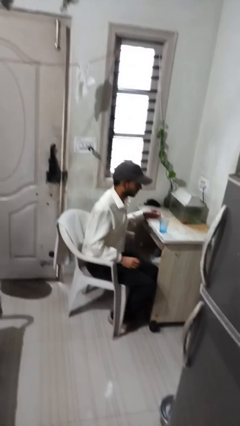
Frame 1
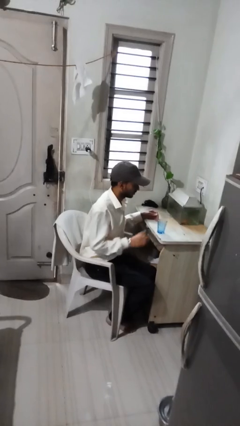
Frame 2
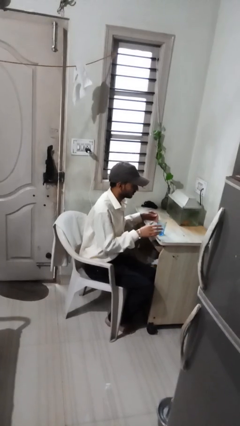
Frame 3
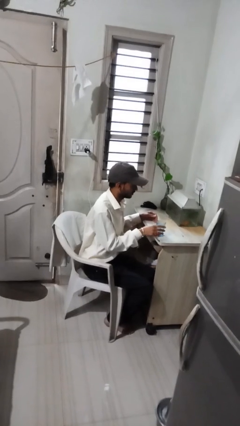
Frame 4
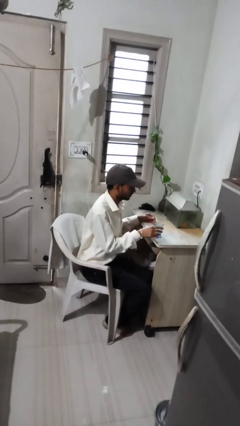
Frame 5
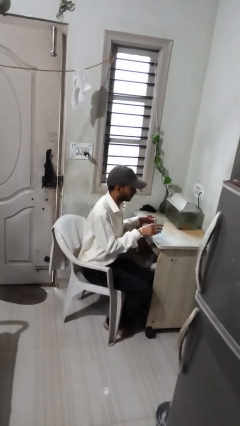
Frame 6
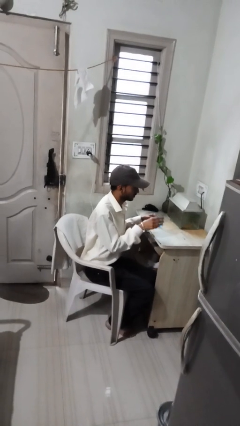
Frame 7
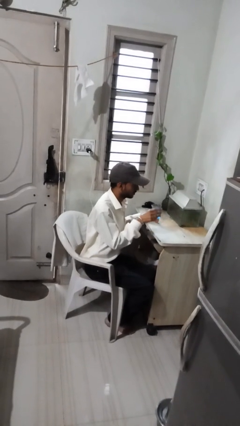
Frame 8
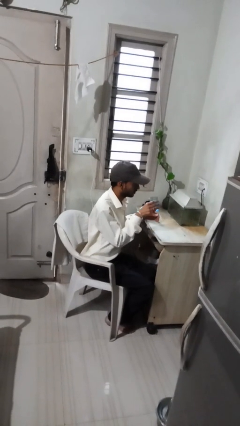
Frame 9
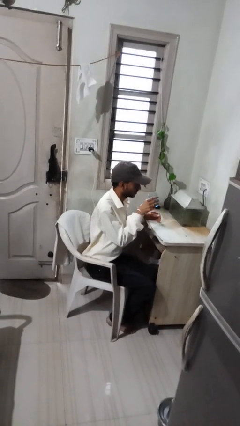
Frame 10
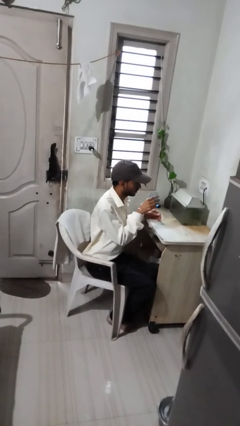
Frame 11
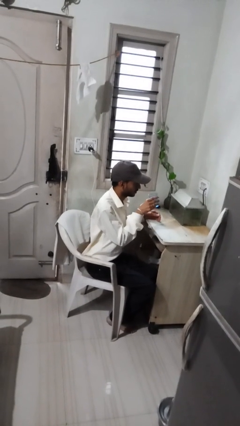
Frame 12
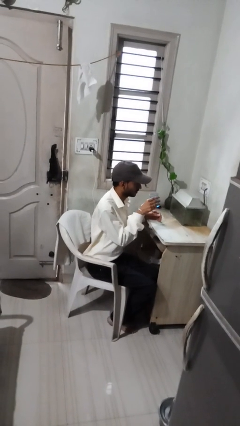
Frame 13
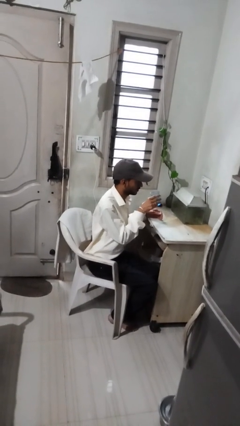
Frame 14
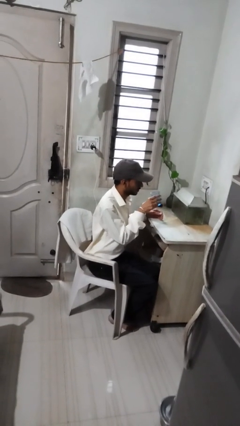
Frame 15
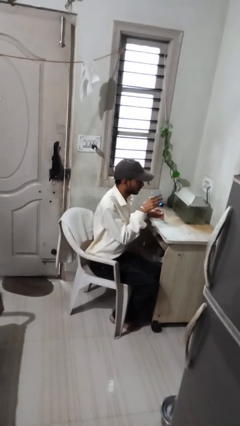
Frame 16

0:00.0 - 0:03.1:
person picks up object from table

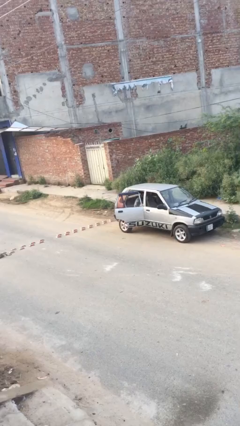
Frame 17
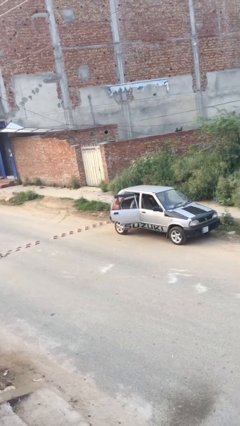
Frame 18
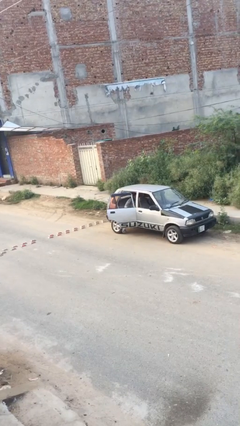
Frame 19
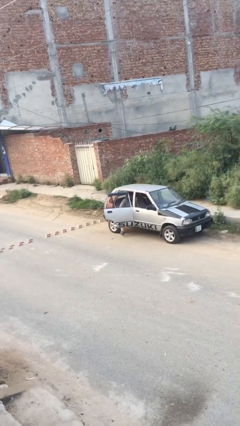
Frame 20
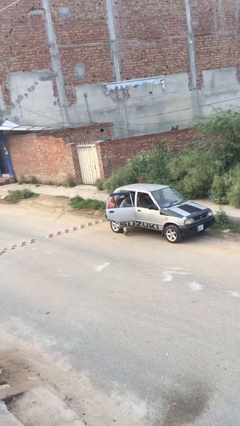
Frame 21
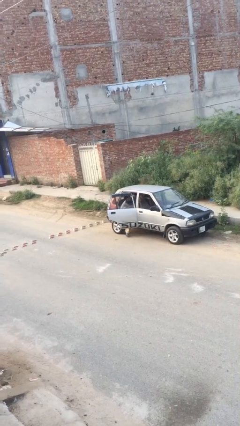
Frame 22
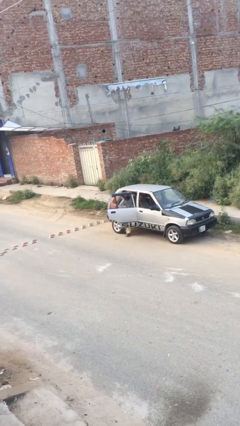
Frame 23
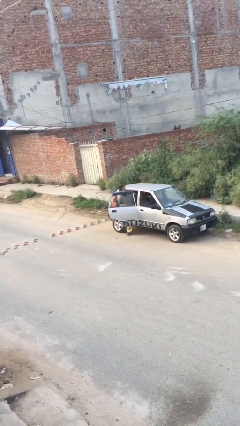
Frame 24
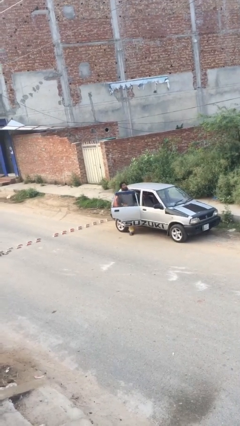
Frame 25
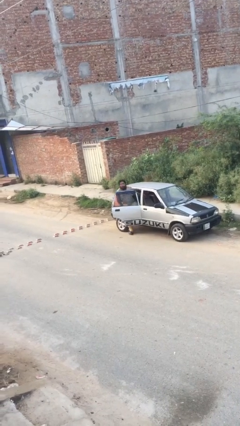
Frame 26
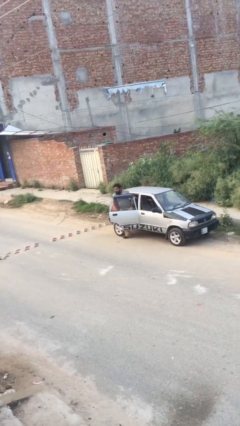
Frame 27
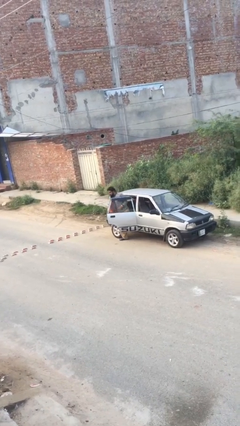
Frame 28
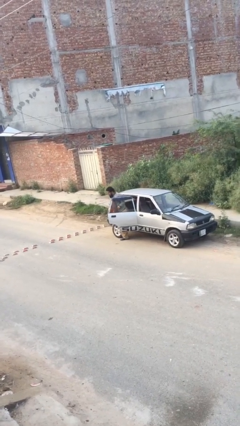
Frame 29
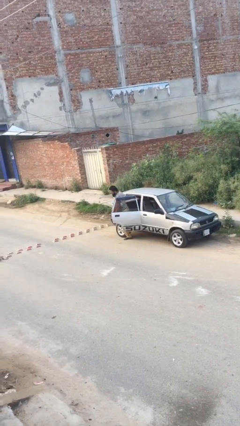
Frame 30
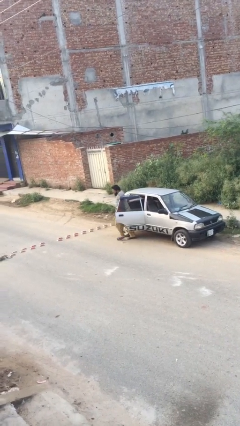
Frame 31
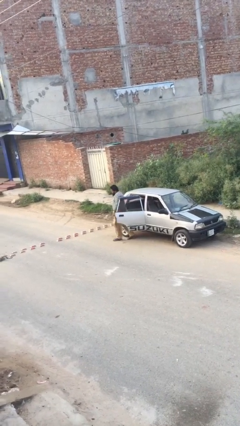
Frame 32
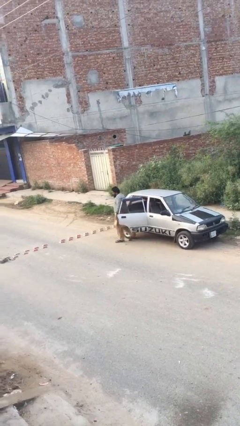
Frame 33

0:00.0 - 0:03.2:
person exits car

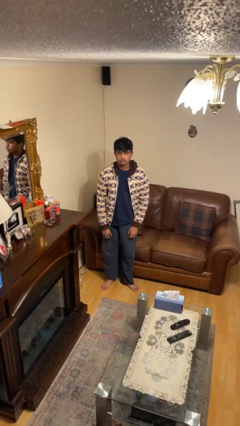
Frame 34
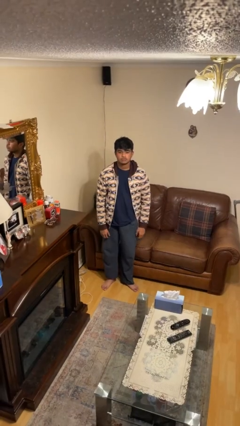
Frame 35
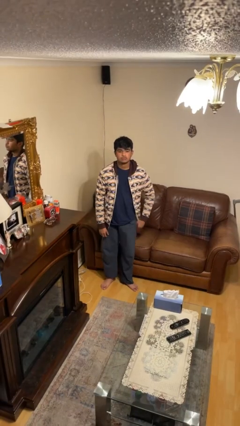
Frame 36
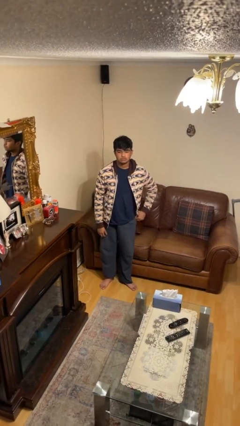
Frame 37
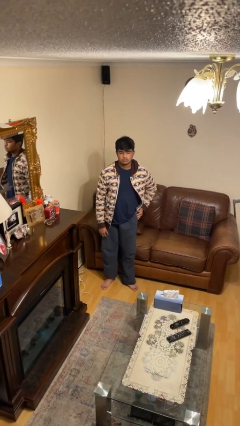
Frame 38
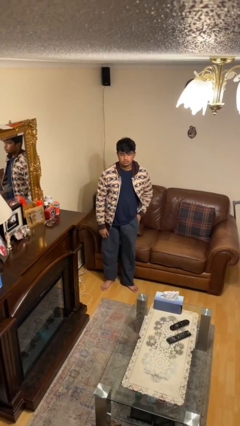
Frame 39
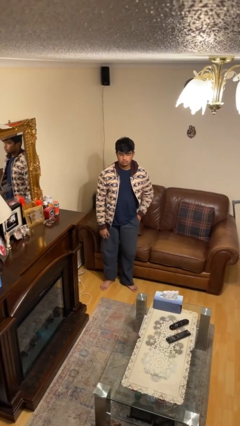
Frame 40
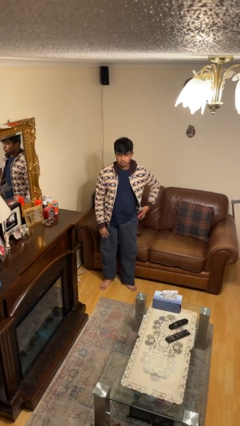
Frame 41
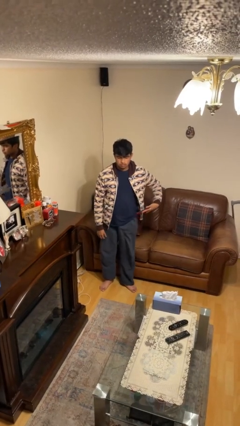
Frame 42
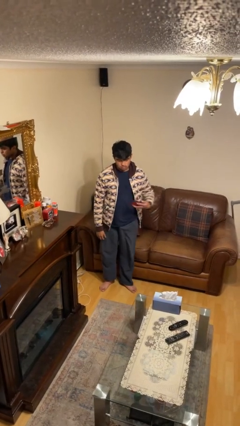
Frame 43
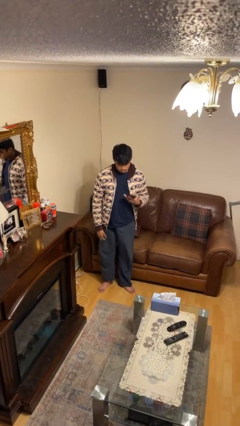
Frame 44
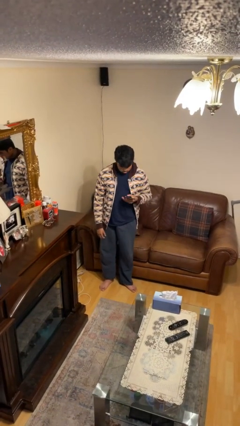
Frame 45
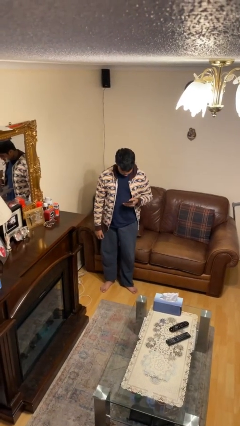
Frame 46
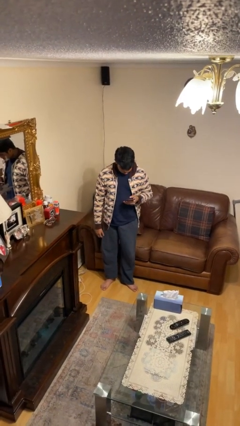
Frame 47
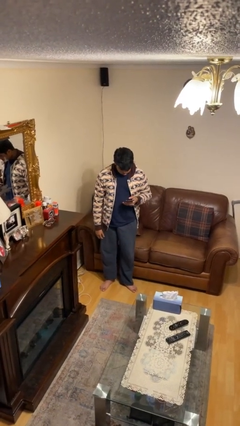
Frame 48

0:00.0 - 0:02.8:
person takes phone from pocket

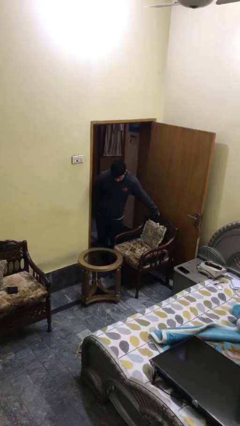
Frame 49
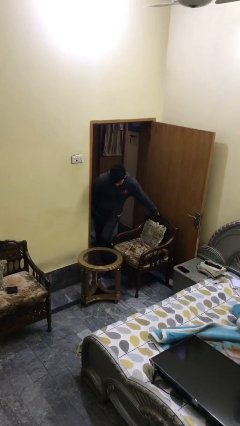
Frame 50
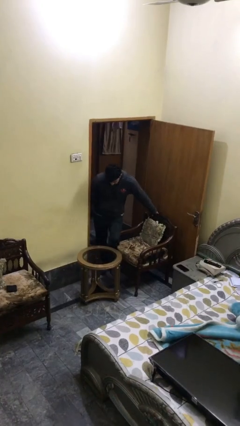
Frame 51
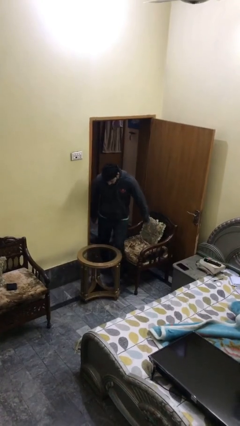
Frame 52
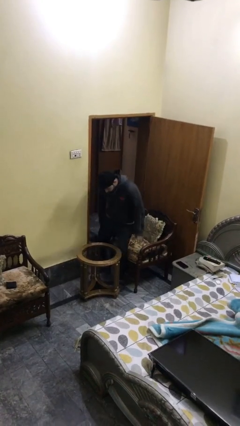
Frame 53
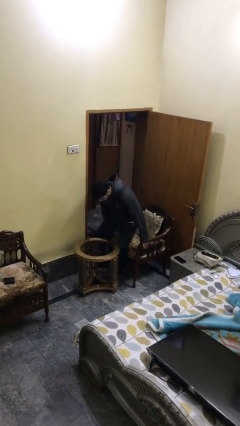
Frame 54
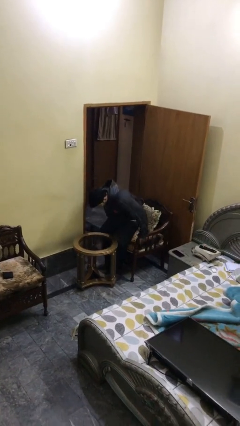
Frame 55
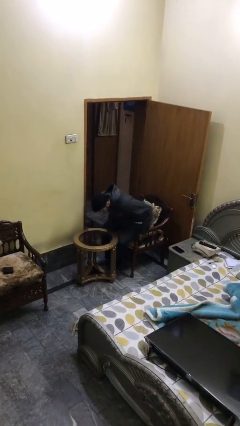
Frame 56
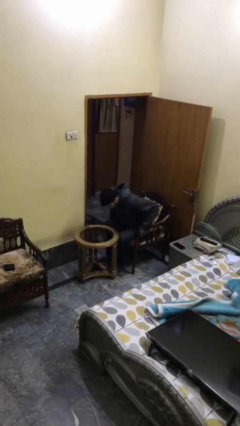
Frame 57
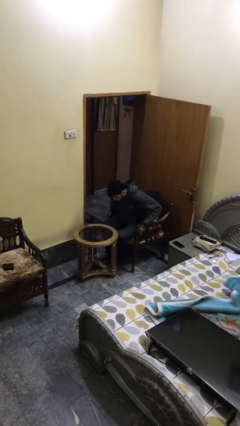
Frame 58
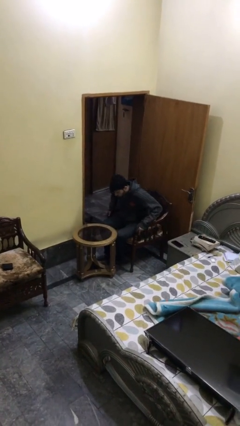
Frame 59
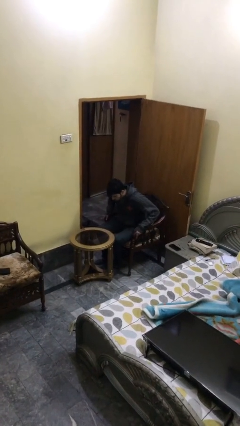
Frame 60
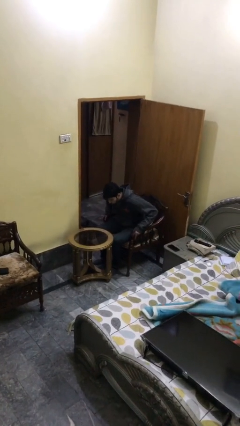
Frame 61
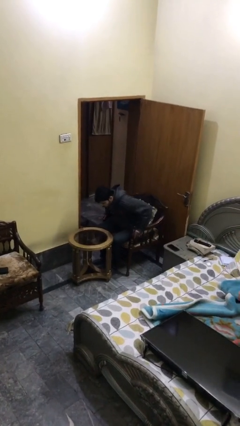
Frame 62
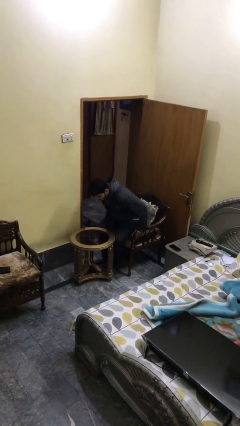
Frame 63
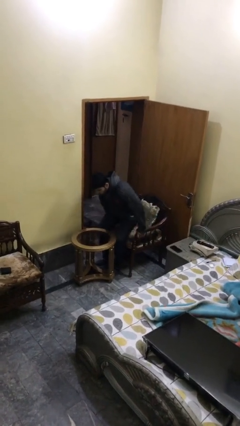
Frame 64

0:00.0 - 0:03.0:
person sits down

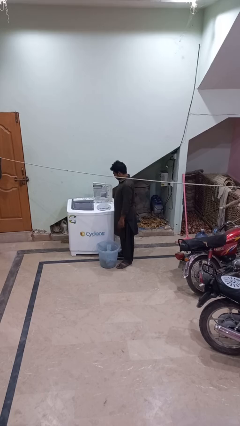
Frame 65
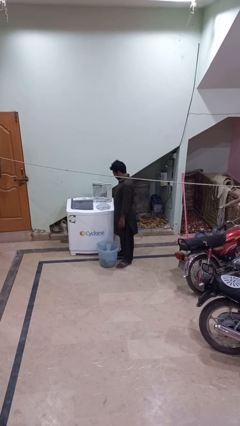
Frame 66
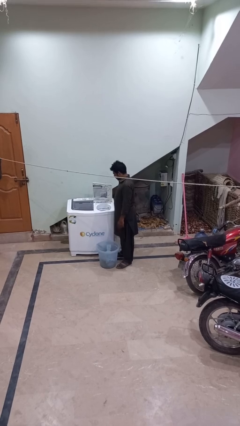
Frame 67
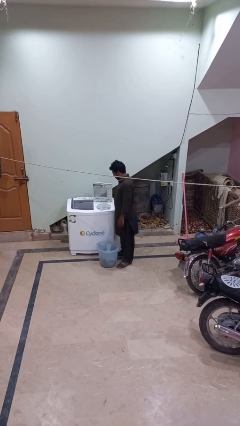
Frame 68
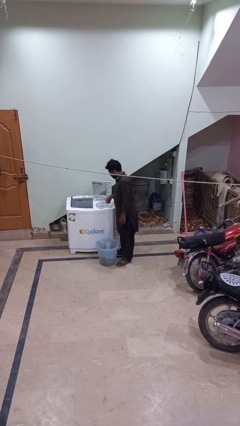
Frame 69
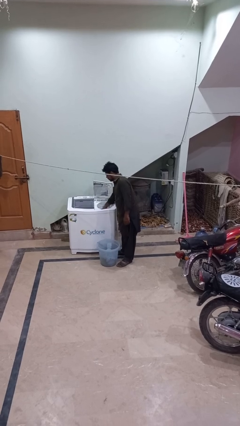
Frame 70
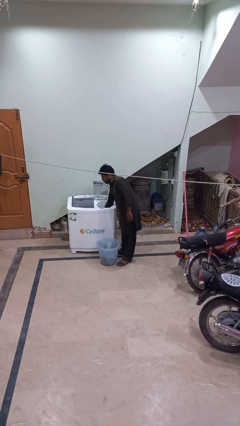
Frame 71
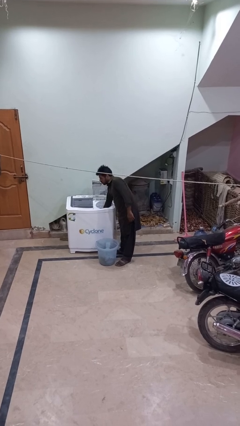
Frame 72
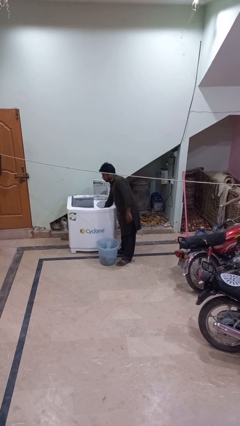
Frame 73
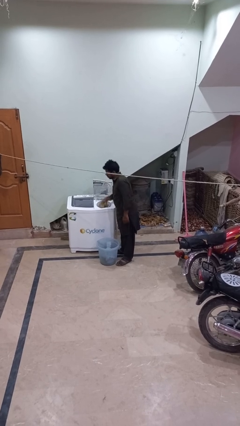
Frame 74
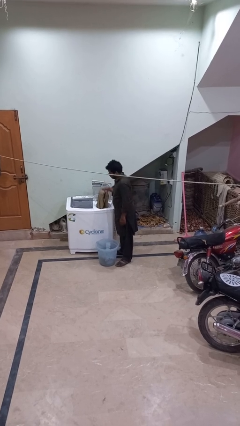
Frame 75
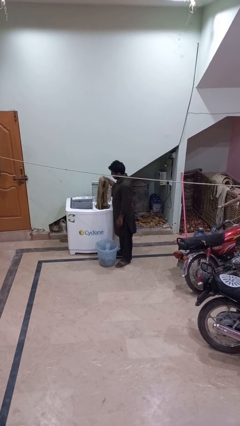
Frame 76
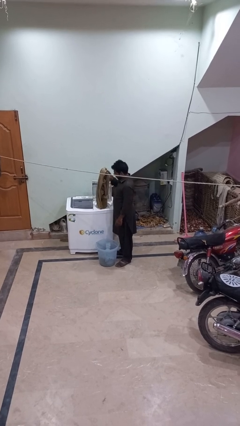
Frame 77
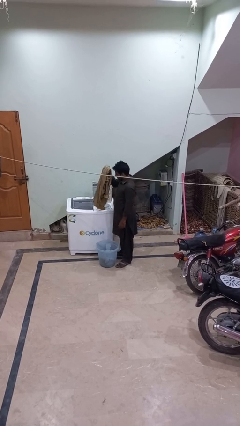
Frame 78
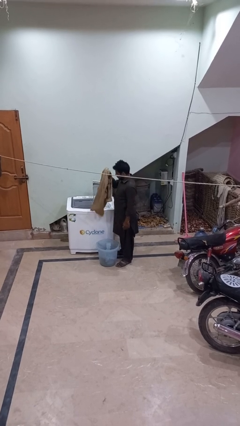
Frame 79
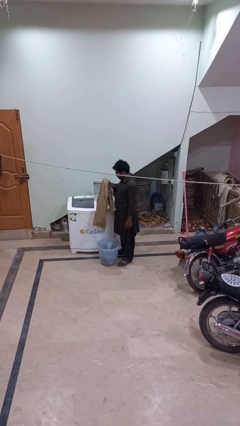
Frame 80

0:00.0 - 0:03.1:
person unloads dryer

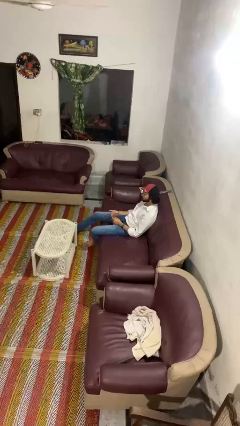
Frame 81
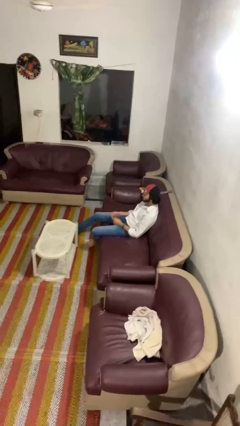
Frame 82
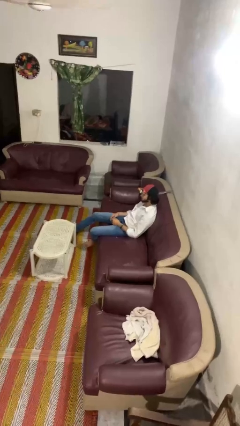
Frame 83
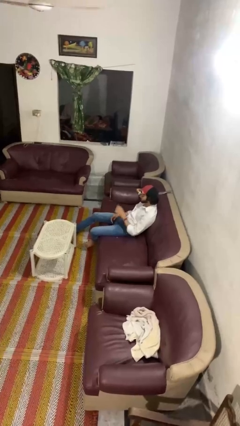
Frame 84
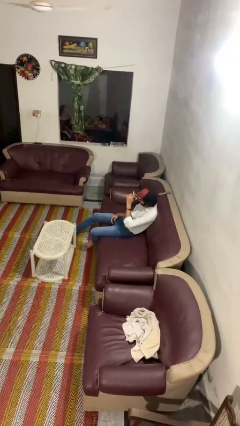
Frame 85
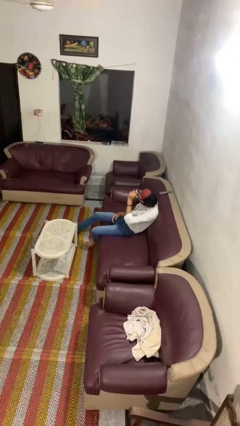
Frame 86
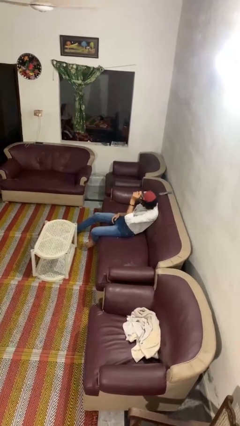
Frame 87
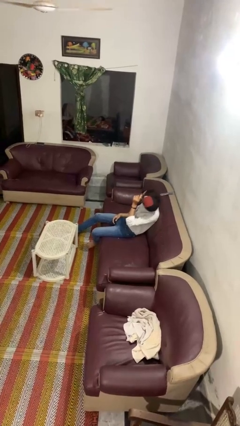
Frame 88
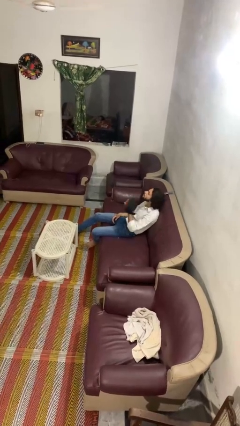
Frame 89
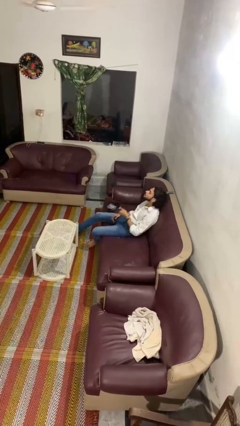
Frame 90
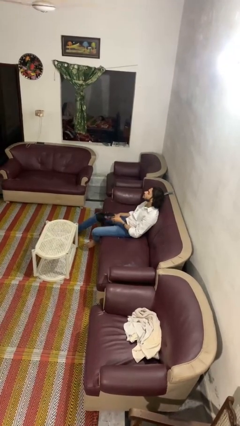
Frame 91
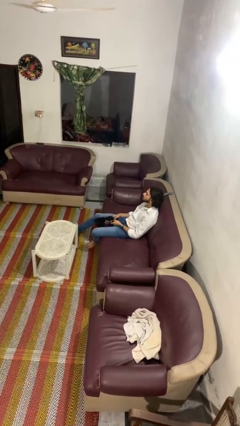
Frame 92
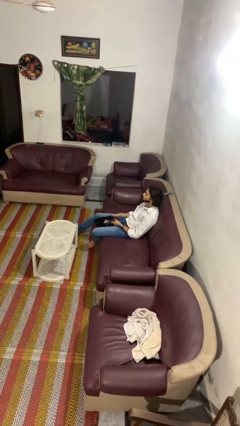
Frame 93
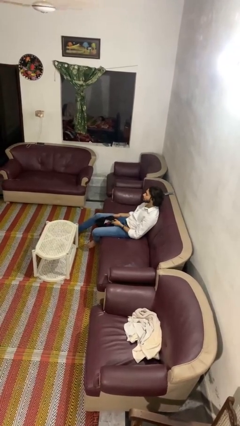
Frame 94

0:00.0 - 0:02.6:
person takes off hat
